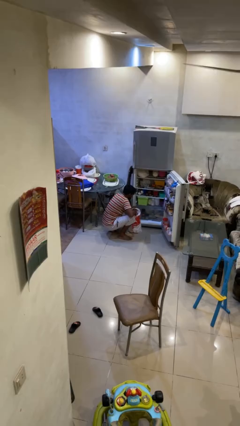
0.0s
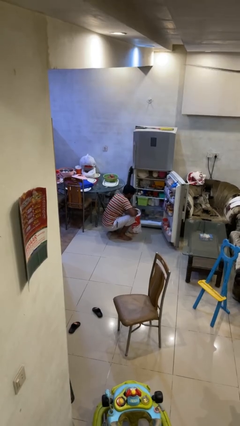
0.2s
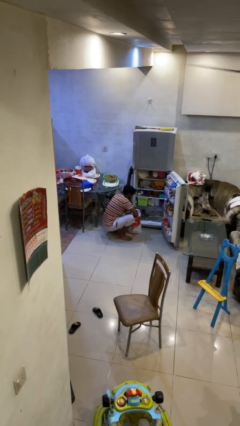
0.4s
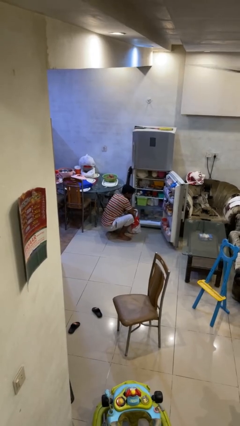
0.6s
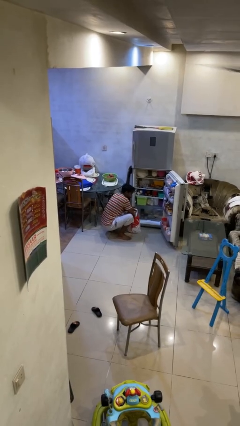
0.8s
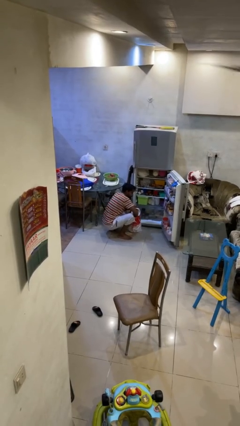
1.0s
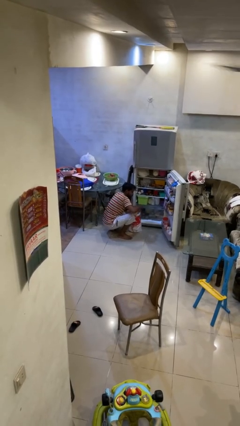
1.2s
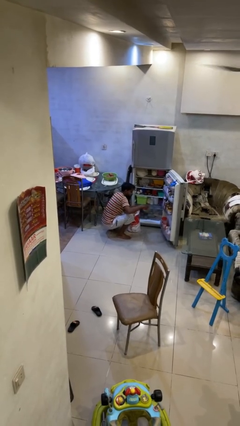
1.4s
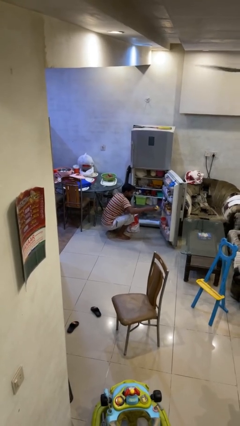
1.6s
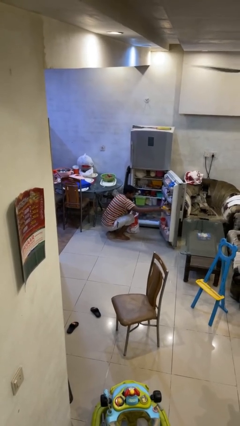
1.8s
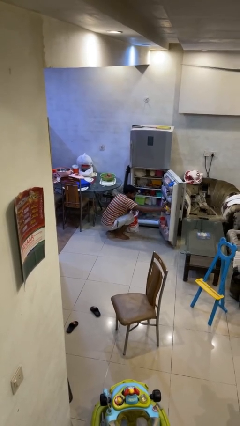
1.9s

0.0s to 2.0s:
person loads groceries into refrigerator

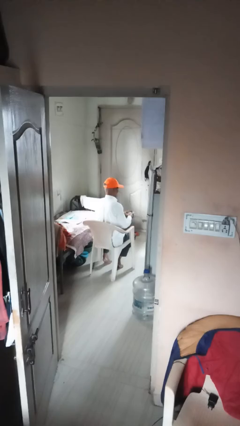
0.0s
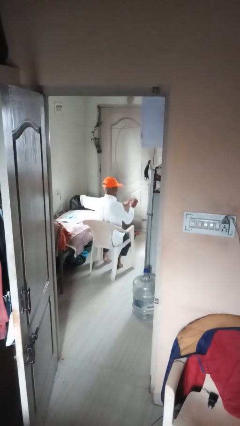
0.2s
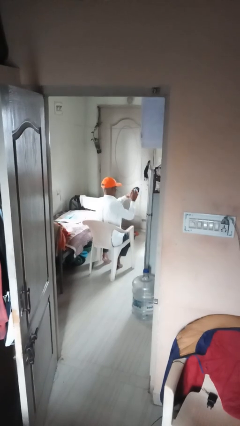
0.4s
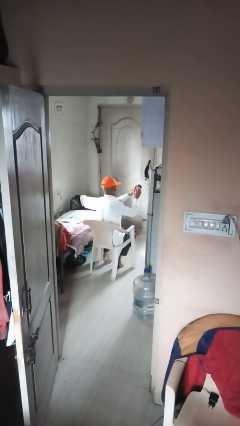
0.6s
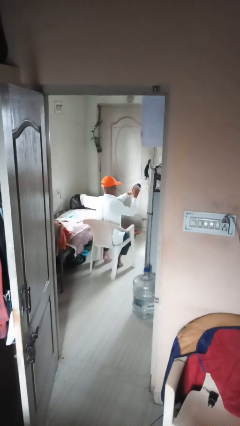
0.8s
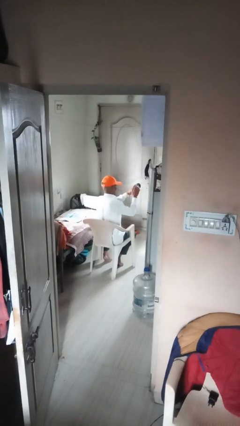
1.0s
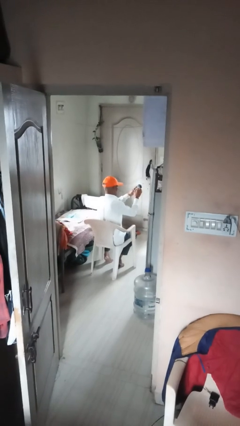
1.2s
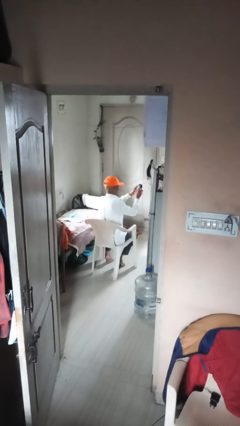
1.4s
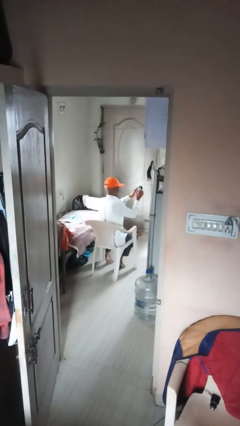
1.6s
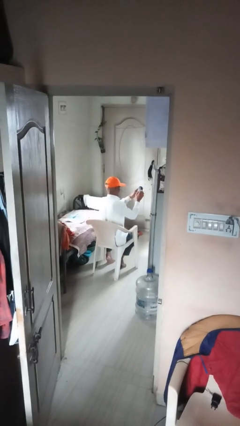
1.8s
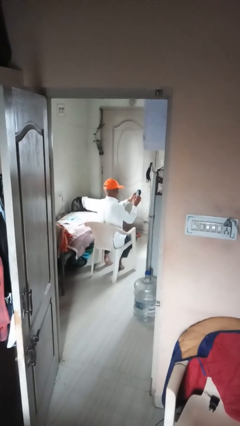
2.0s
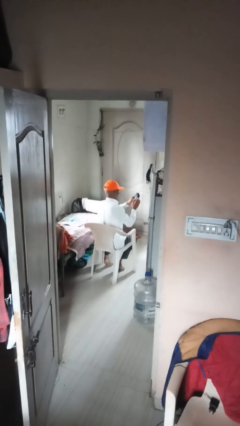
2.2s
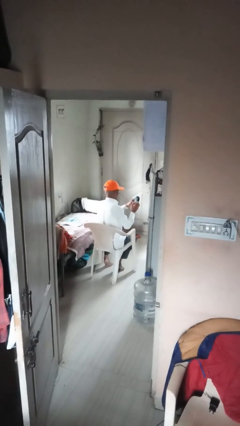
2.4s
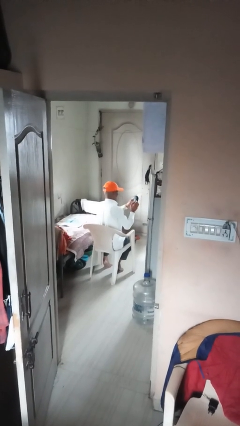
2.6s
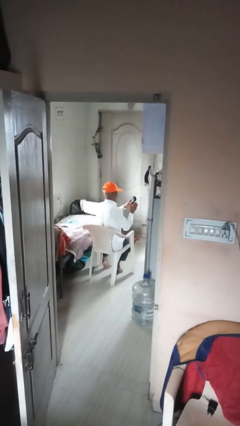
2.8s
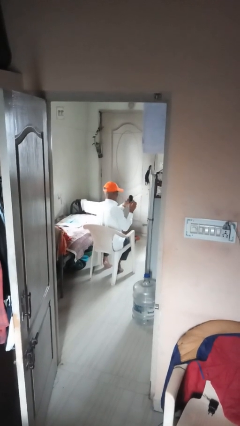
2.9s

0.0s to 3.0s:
person taps object with finger

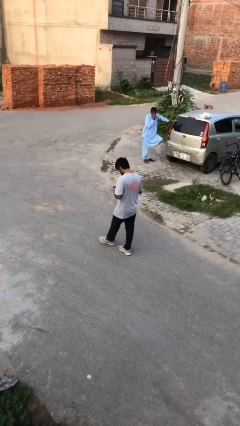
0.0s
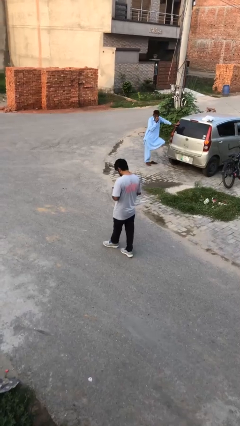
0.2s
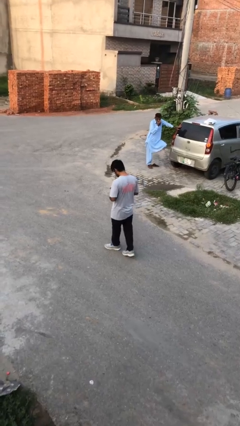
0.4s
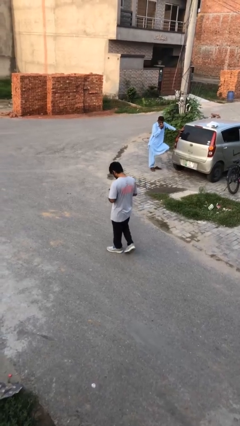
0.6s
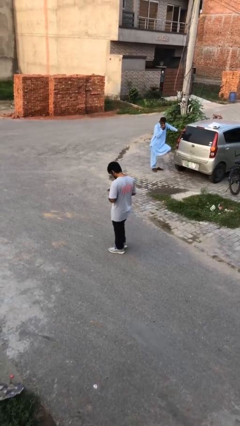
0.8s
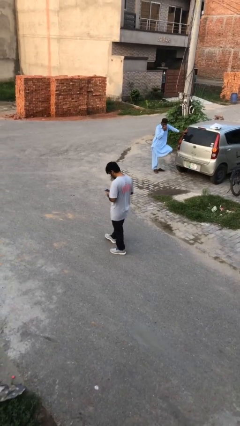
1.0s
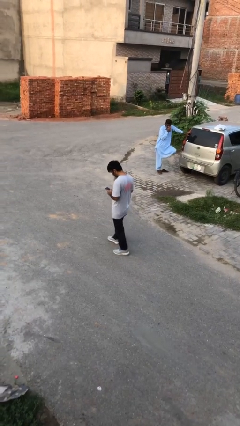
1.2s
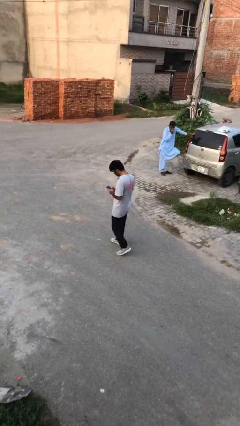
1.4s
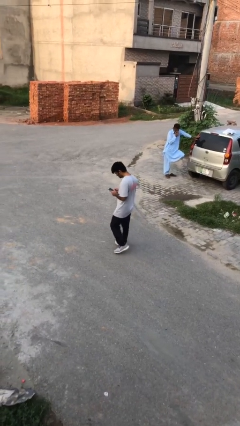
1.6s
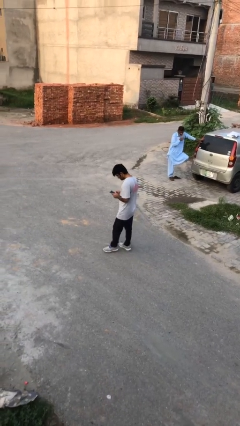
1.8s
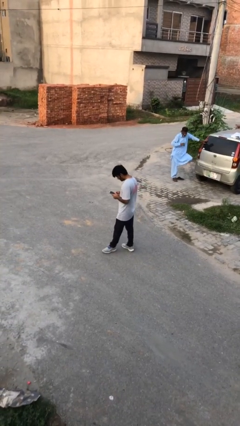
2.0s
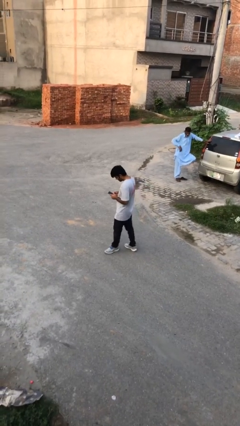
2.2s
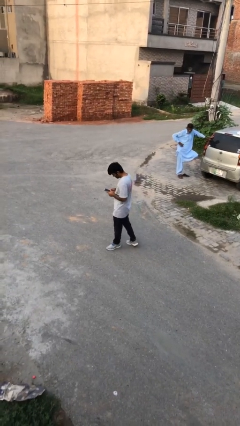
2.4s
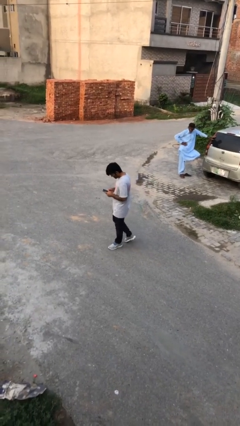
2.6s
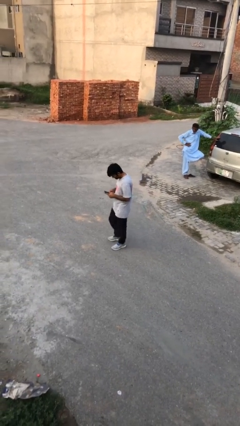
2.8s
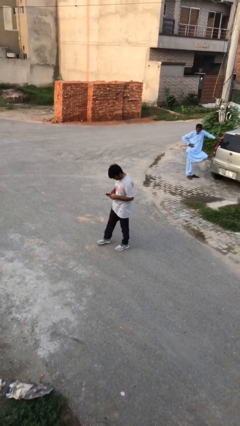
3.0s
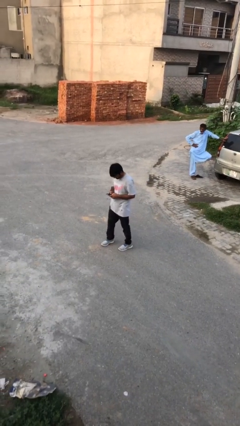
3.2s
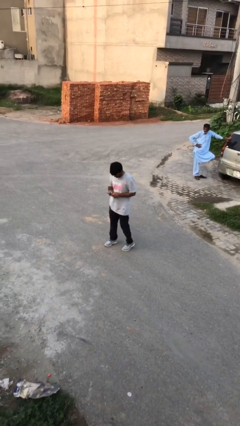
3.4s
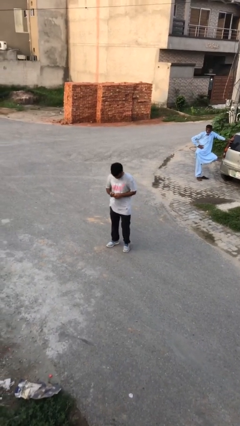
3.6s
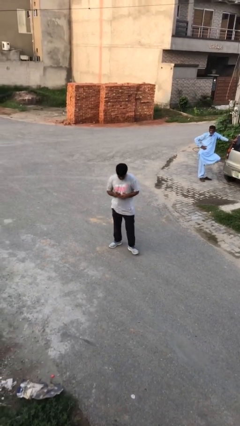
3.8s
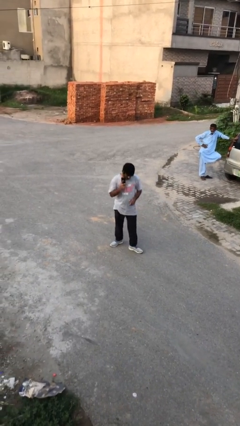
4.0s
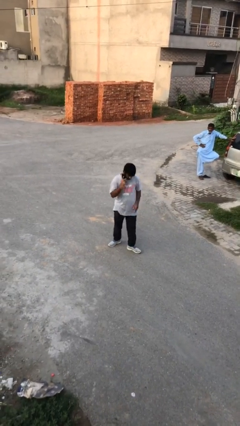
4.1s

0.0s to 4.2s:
person texts on phone

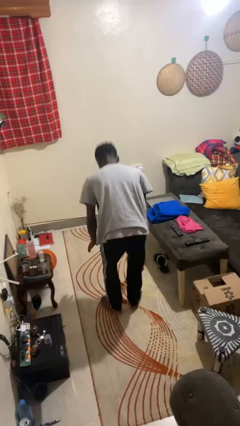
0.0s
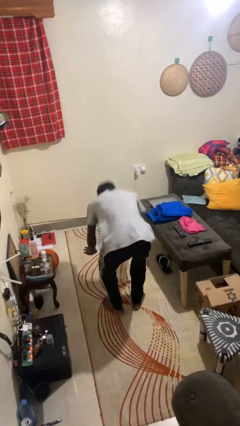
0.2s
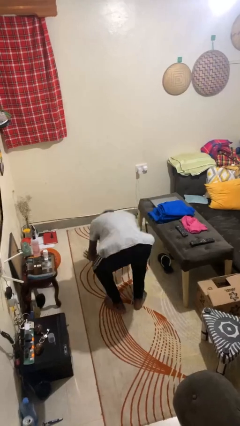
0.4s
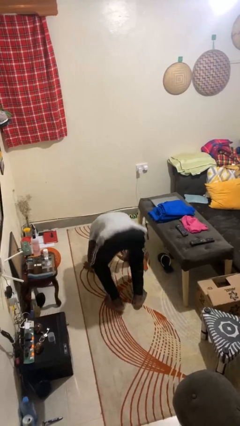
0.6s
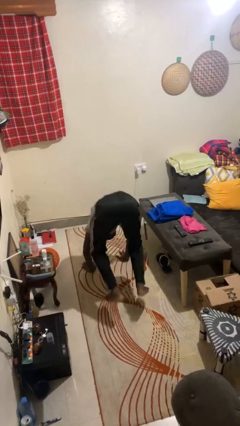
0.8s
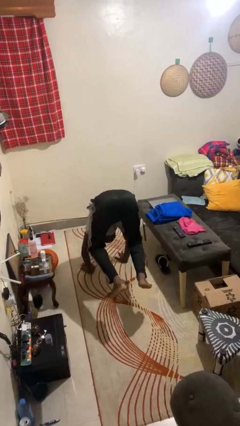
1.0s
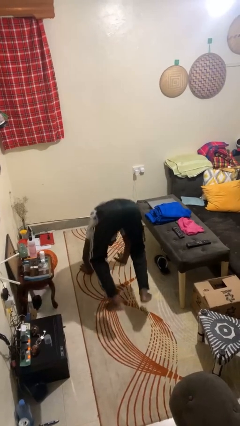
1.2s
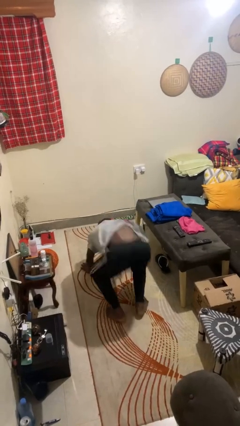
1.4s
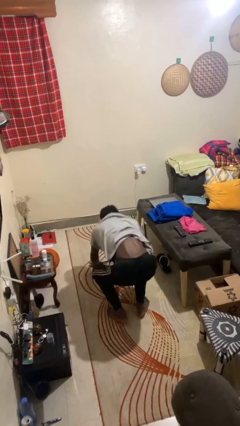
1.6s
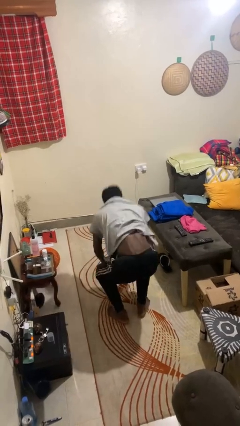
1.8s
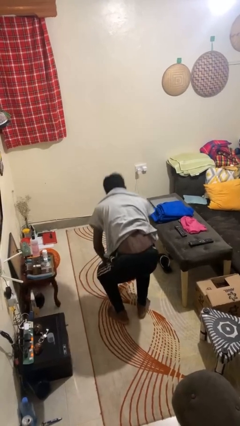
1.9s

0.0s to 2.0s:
person handstand

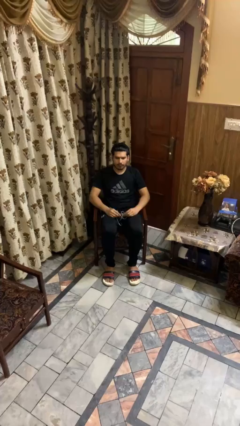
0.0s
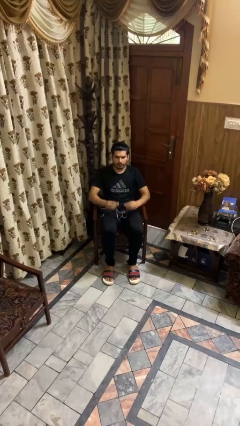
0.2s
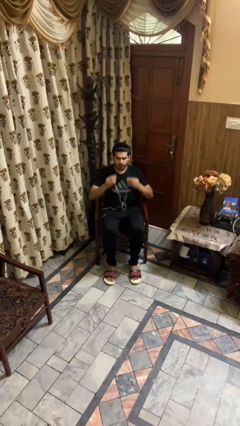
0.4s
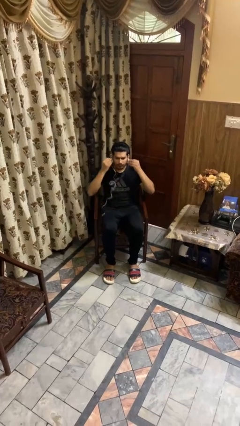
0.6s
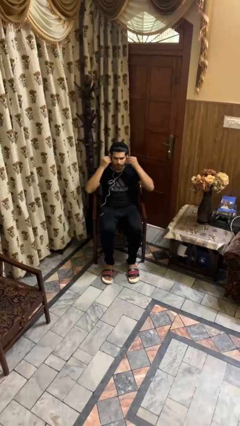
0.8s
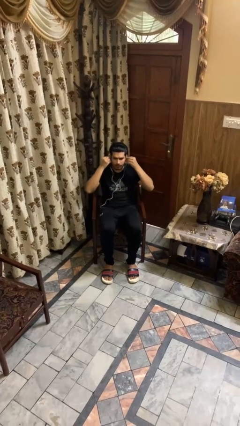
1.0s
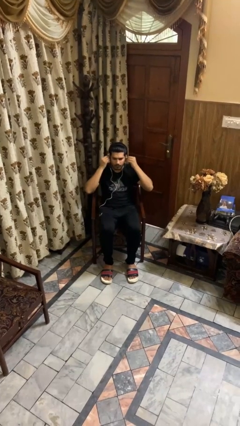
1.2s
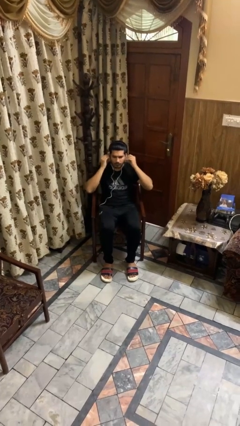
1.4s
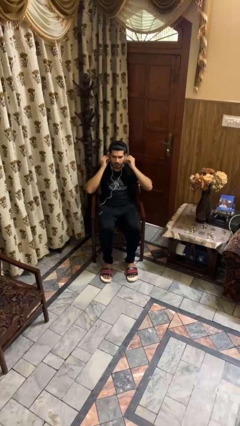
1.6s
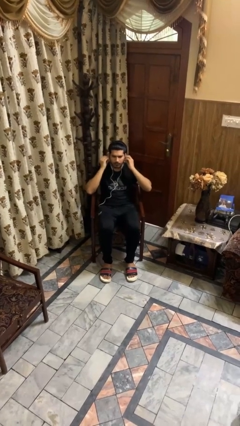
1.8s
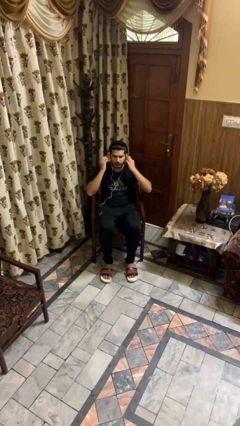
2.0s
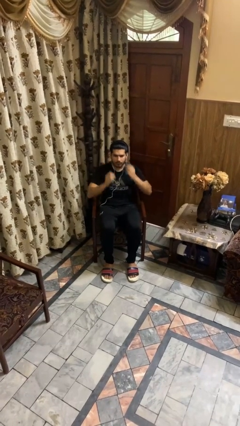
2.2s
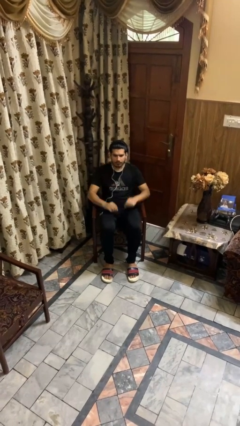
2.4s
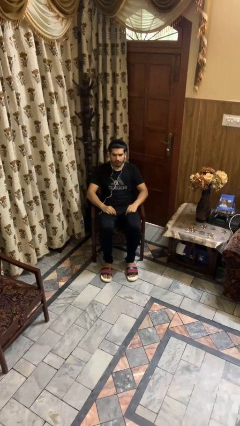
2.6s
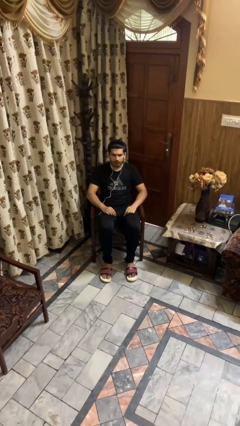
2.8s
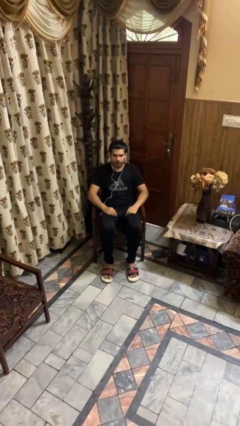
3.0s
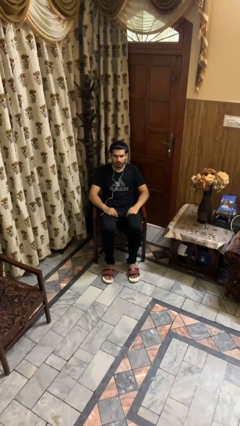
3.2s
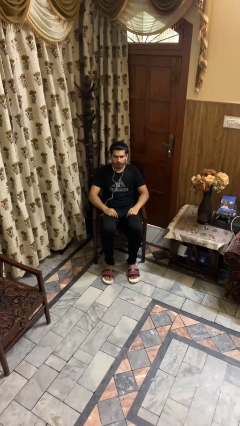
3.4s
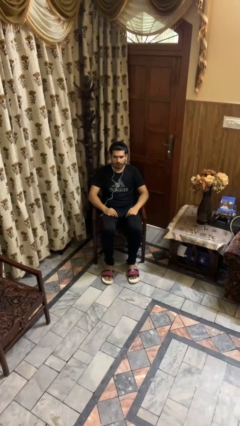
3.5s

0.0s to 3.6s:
person puts on headphones

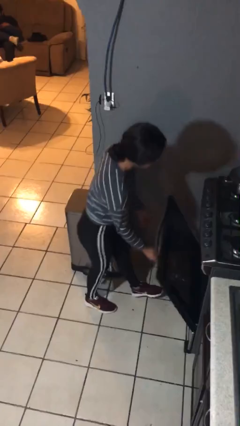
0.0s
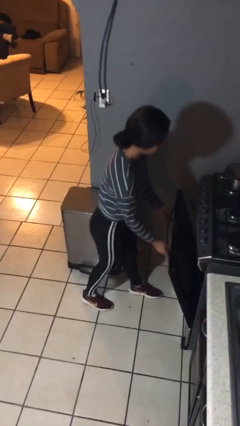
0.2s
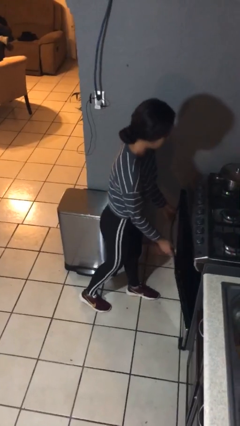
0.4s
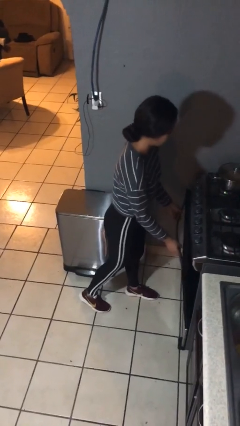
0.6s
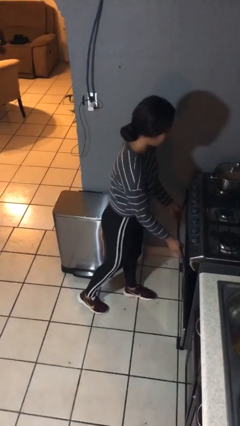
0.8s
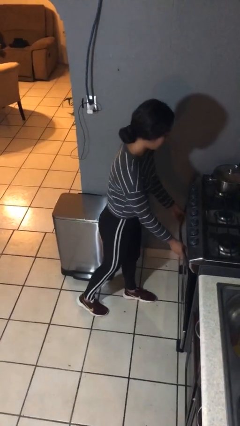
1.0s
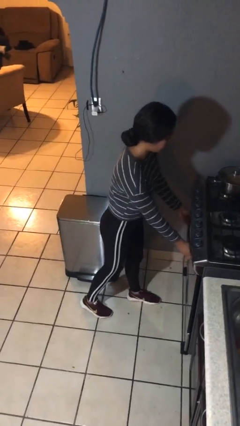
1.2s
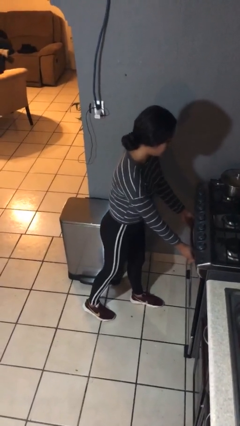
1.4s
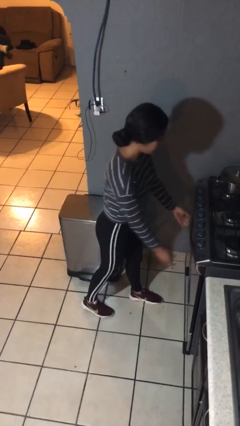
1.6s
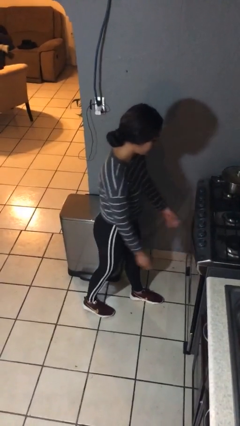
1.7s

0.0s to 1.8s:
person closes oven door

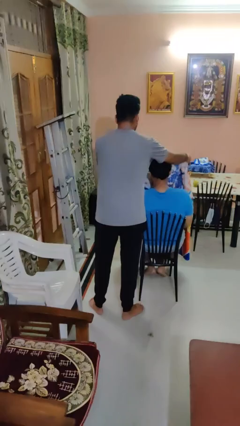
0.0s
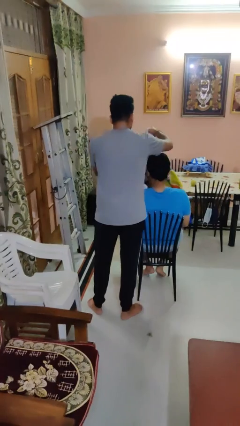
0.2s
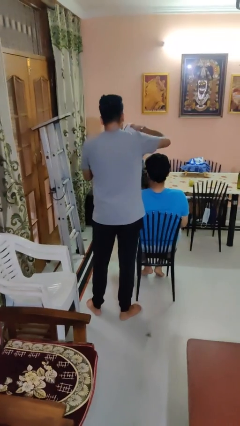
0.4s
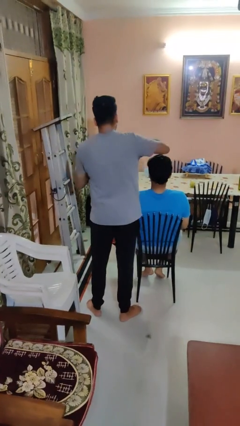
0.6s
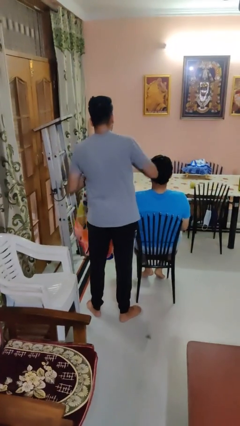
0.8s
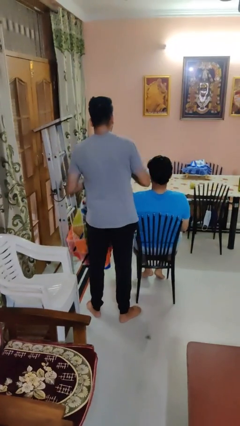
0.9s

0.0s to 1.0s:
person uncovers friend with blanket
